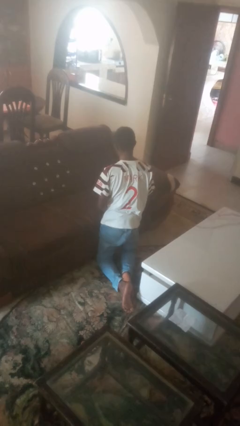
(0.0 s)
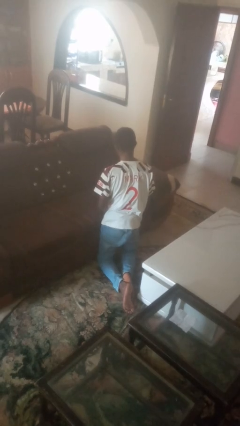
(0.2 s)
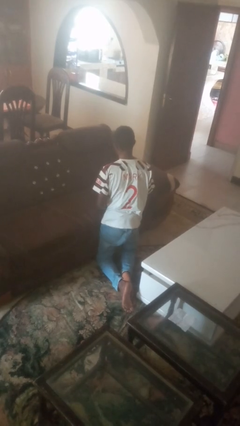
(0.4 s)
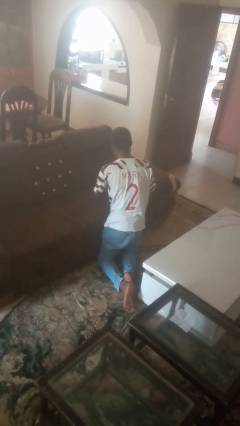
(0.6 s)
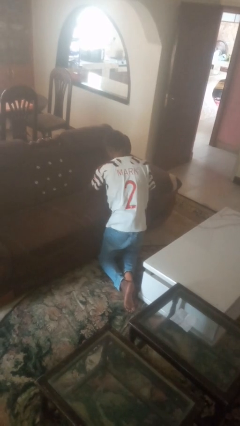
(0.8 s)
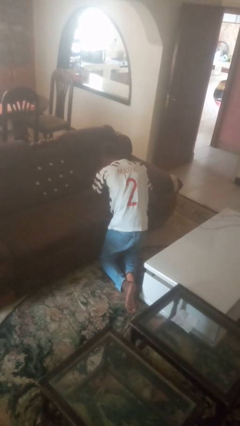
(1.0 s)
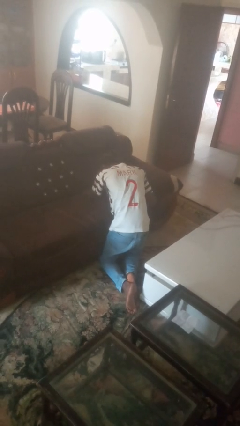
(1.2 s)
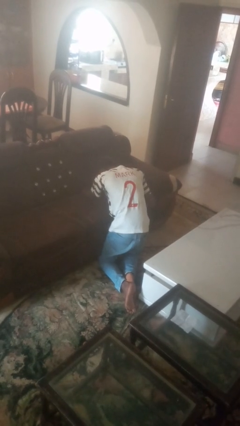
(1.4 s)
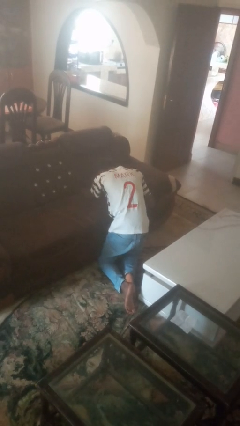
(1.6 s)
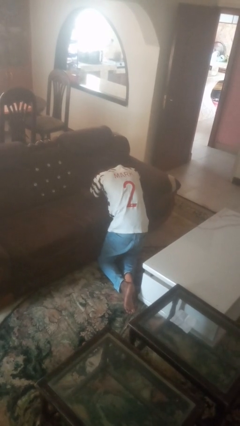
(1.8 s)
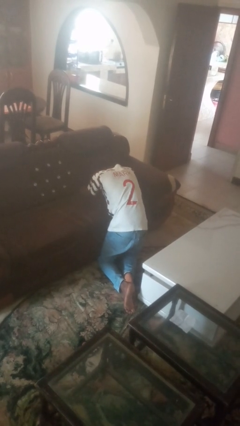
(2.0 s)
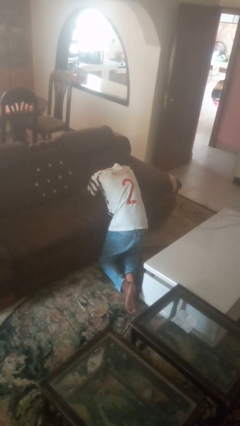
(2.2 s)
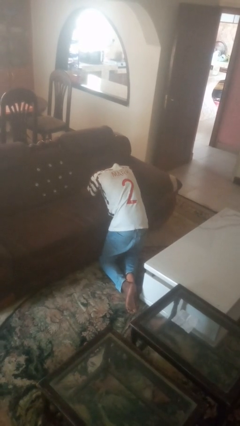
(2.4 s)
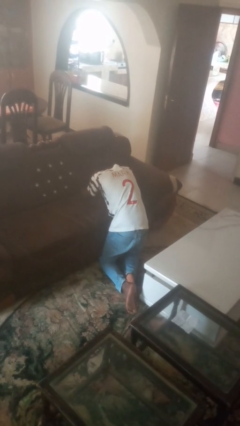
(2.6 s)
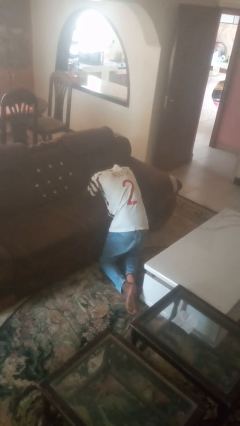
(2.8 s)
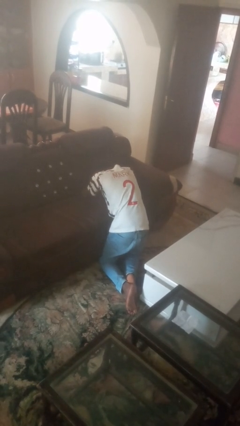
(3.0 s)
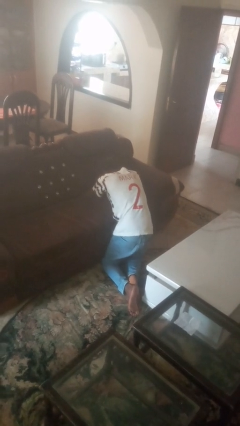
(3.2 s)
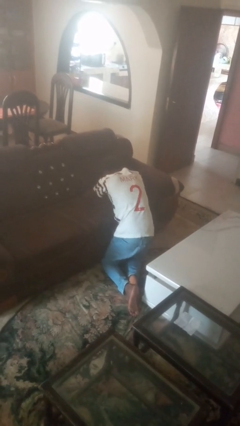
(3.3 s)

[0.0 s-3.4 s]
person searches in couch

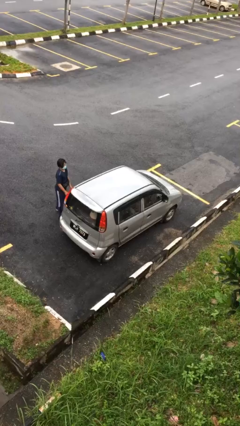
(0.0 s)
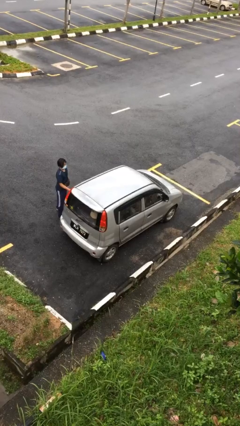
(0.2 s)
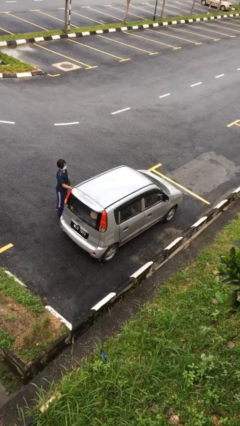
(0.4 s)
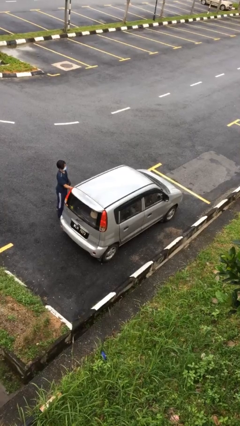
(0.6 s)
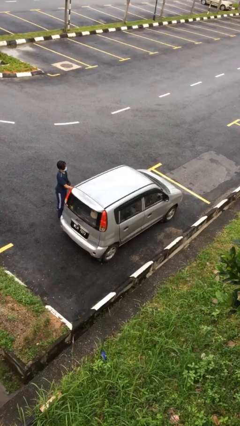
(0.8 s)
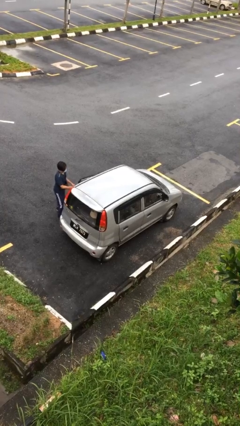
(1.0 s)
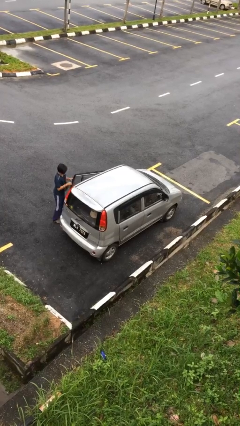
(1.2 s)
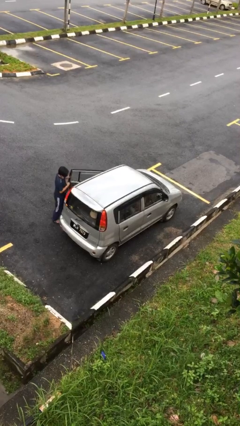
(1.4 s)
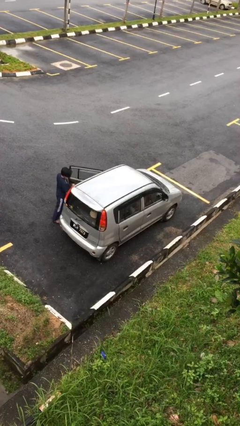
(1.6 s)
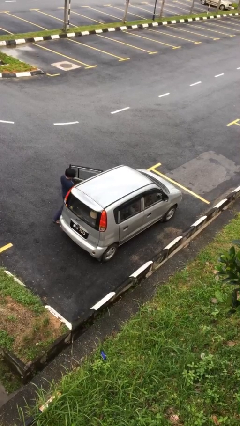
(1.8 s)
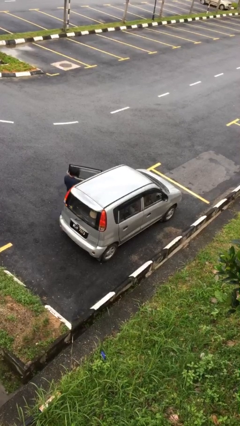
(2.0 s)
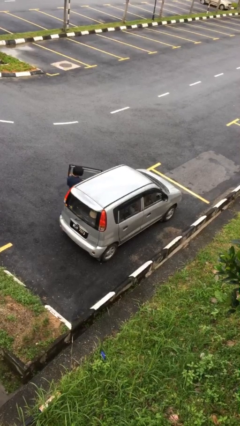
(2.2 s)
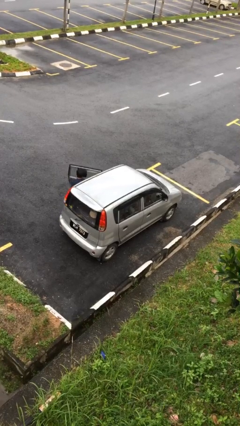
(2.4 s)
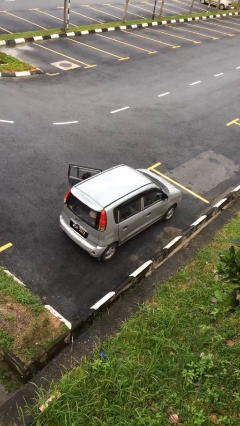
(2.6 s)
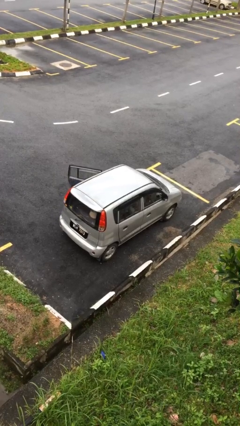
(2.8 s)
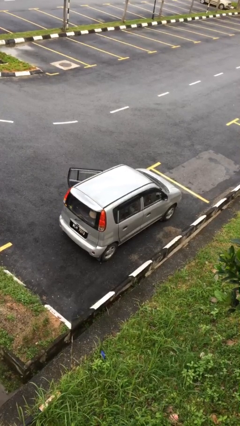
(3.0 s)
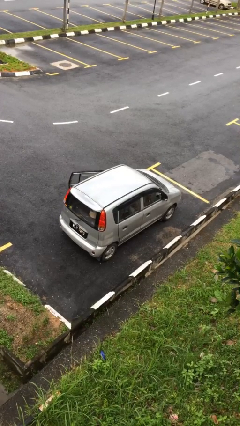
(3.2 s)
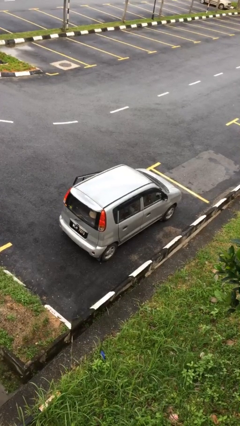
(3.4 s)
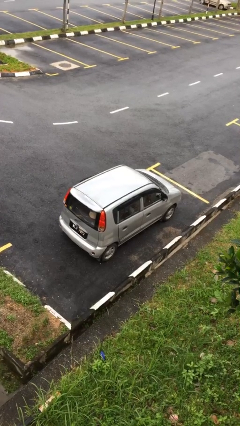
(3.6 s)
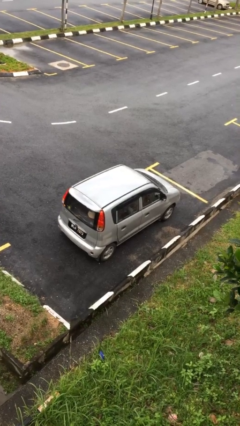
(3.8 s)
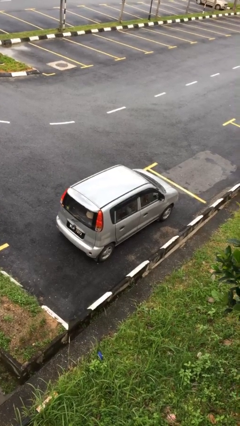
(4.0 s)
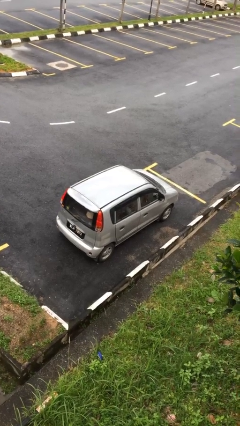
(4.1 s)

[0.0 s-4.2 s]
car picks up person

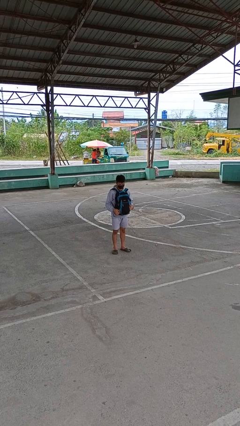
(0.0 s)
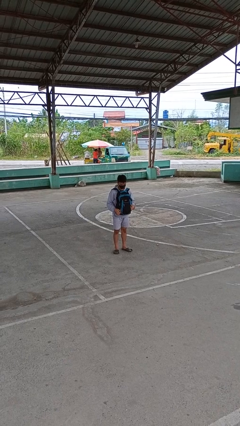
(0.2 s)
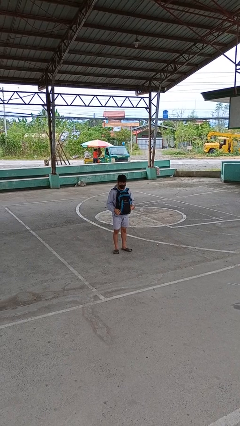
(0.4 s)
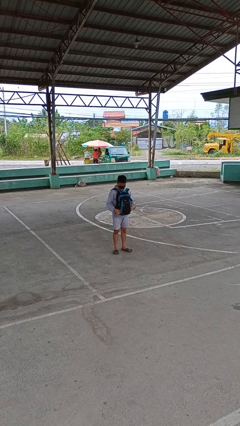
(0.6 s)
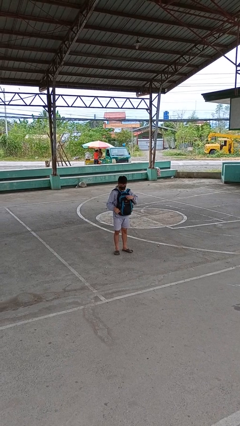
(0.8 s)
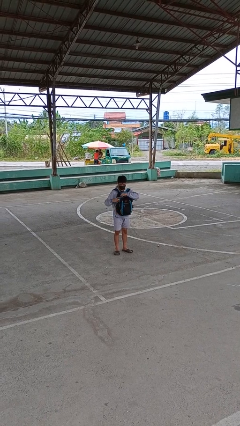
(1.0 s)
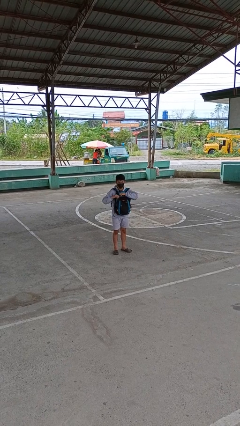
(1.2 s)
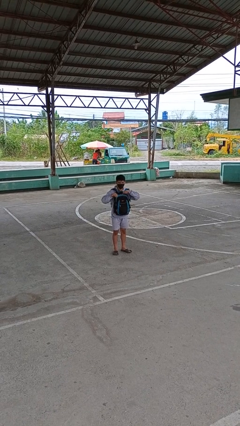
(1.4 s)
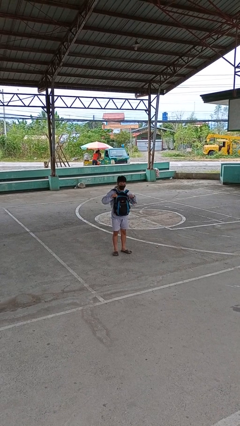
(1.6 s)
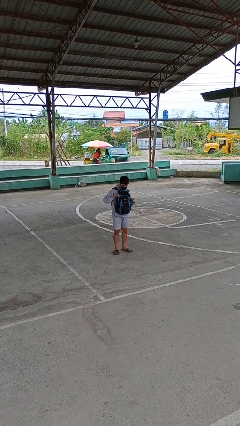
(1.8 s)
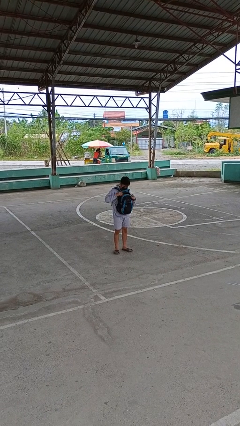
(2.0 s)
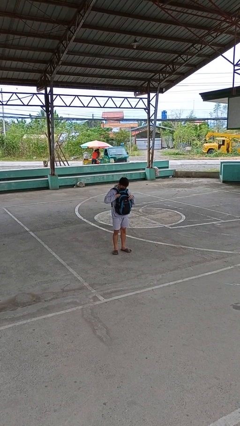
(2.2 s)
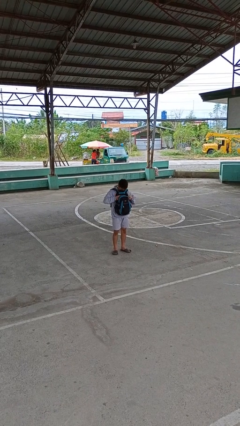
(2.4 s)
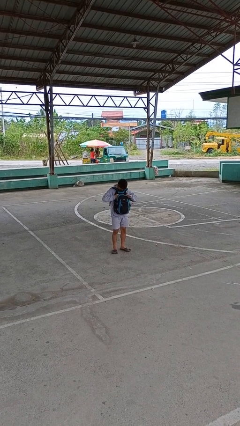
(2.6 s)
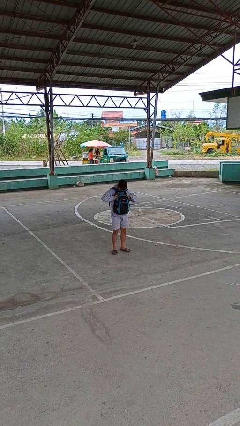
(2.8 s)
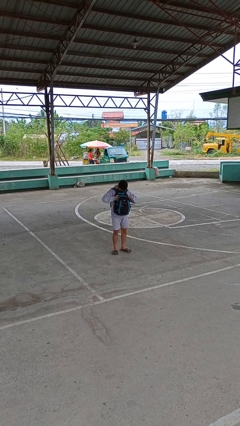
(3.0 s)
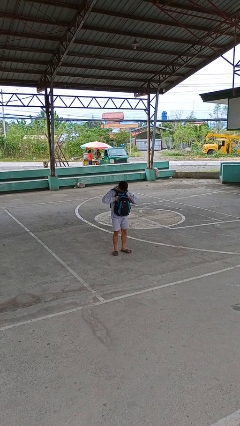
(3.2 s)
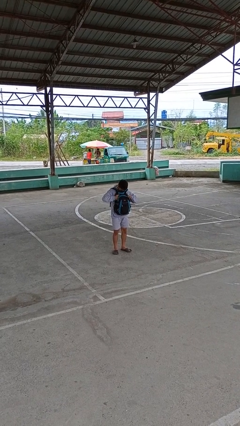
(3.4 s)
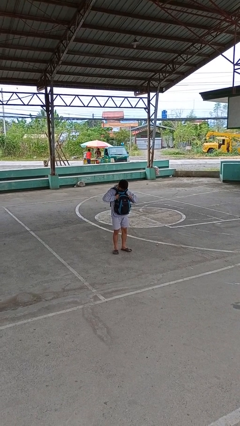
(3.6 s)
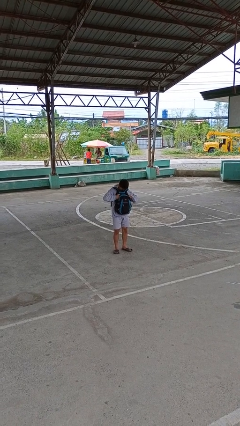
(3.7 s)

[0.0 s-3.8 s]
person searches in backpack

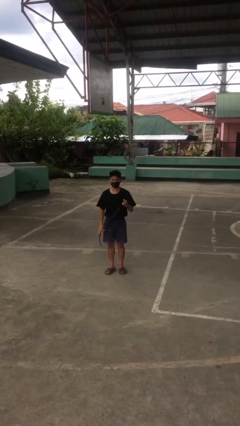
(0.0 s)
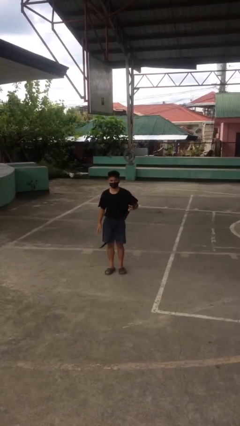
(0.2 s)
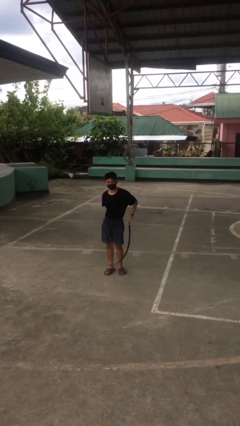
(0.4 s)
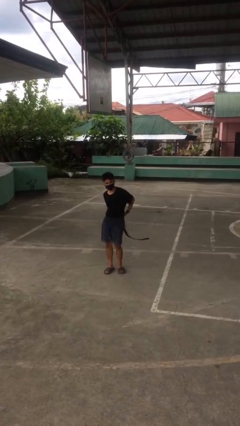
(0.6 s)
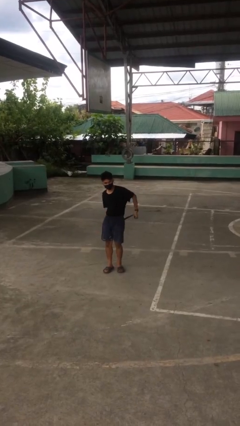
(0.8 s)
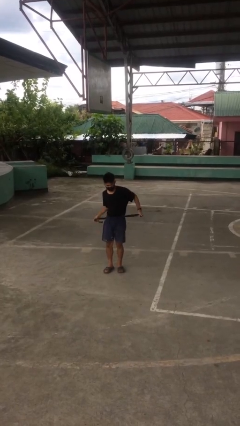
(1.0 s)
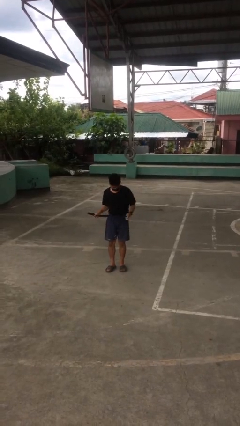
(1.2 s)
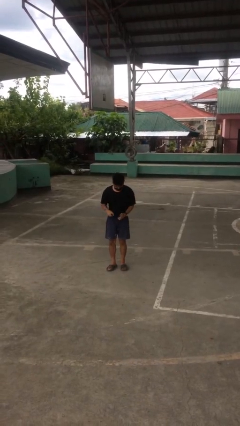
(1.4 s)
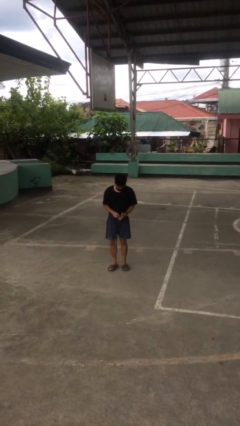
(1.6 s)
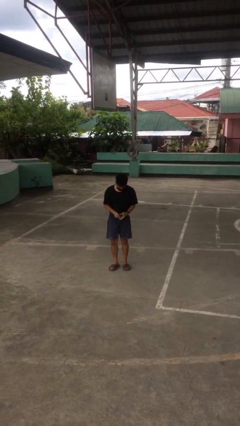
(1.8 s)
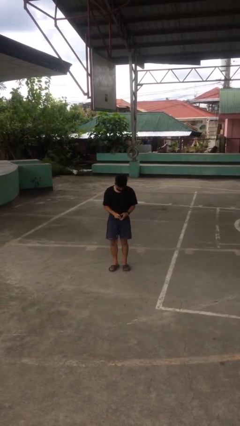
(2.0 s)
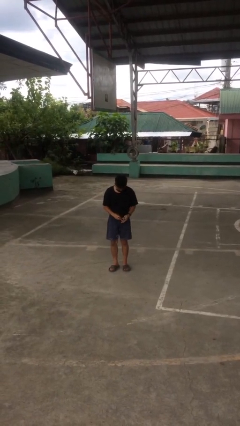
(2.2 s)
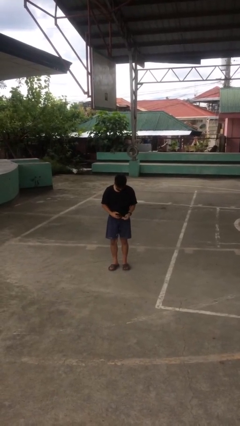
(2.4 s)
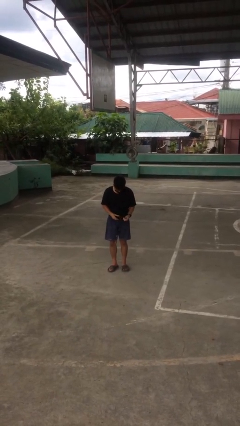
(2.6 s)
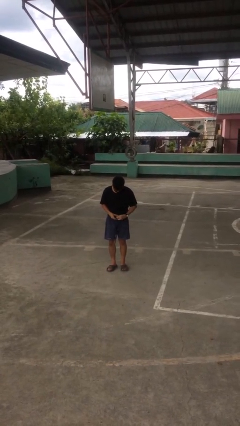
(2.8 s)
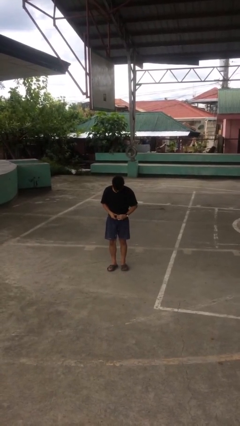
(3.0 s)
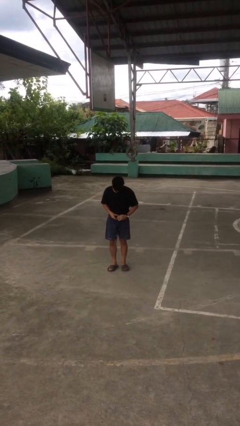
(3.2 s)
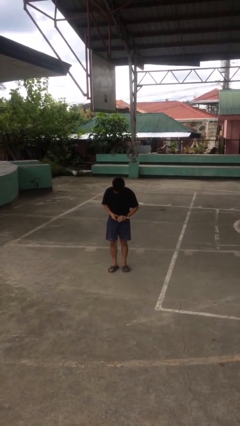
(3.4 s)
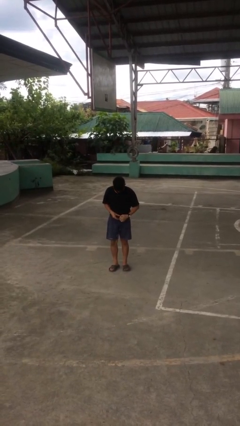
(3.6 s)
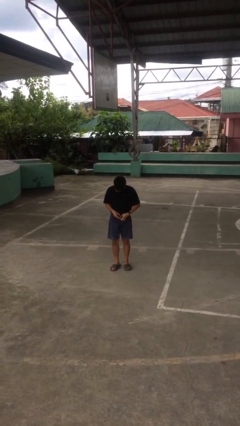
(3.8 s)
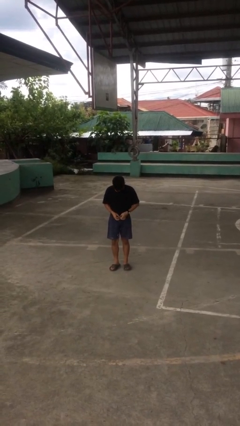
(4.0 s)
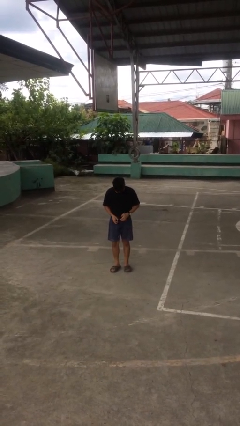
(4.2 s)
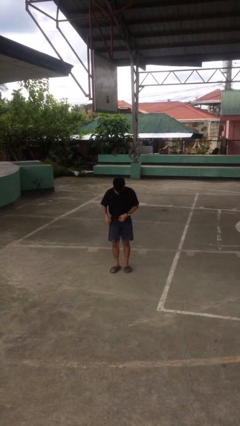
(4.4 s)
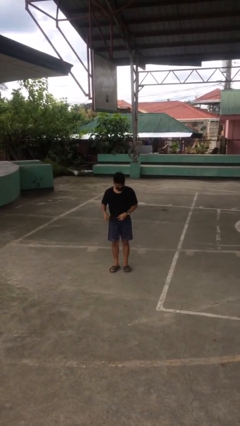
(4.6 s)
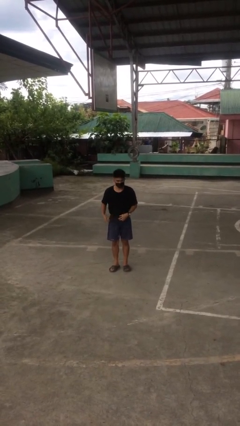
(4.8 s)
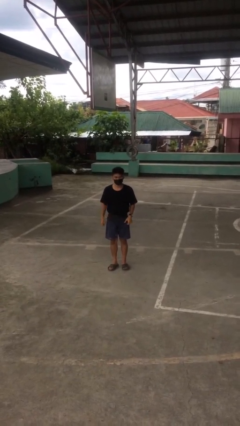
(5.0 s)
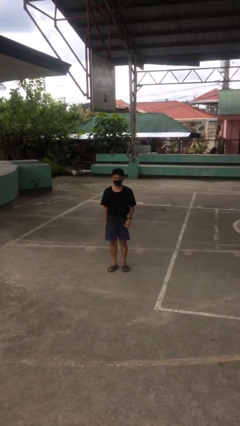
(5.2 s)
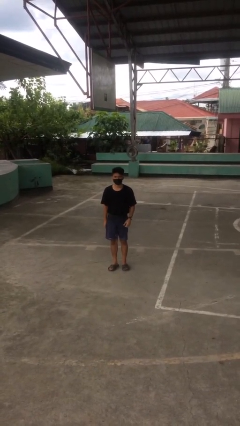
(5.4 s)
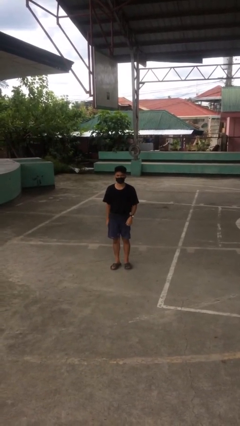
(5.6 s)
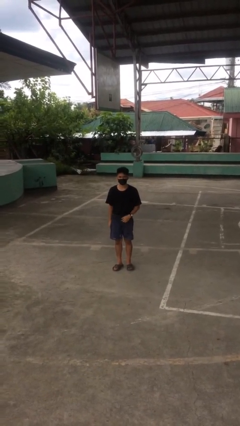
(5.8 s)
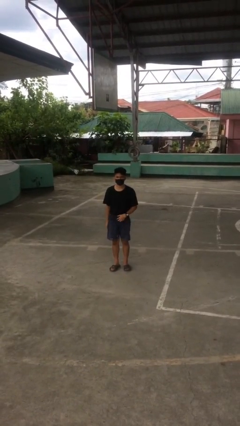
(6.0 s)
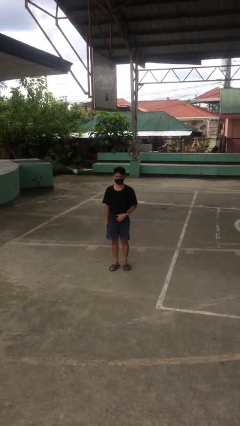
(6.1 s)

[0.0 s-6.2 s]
person puts on belt
